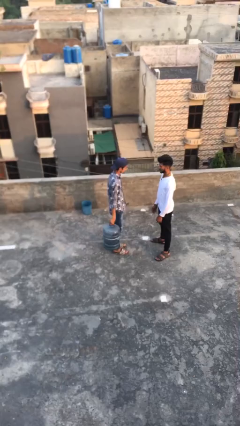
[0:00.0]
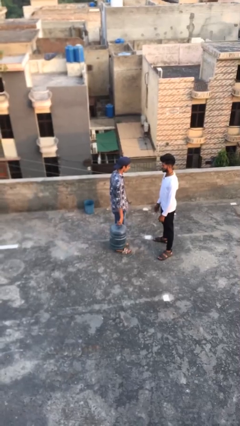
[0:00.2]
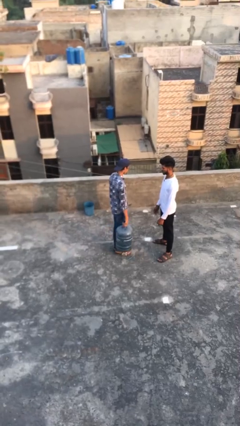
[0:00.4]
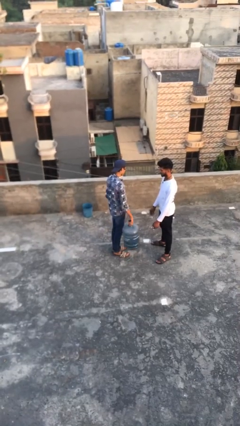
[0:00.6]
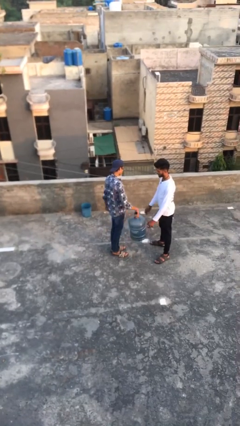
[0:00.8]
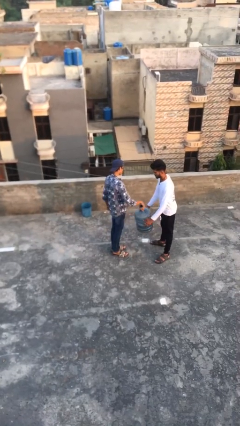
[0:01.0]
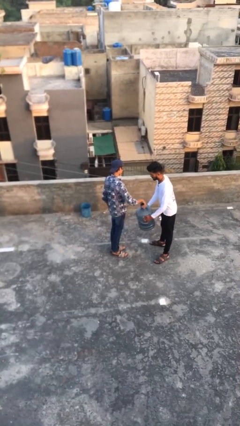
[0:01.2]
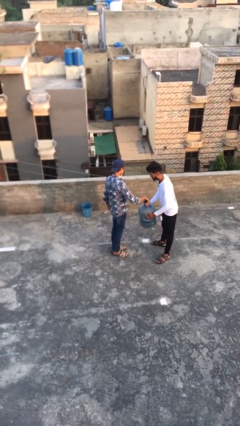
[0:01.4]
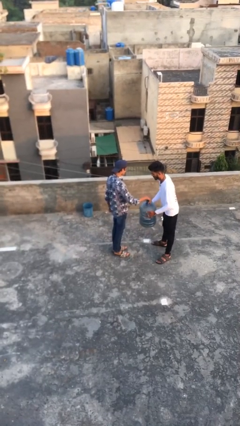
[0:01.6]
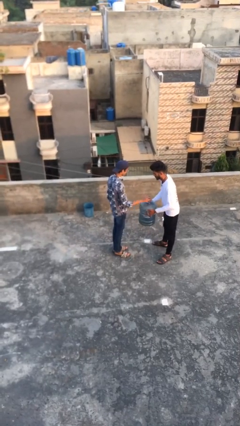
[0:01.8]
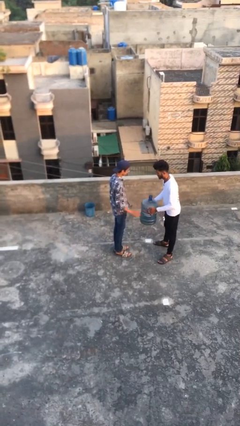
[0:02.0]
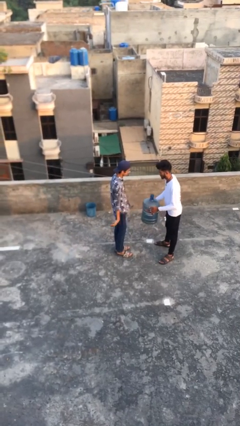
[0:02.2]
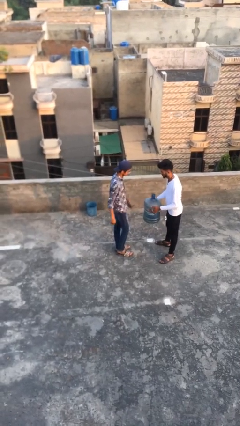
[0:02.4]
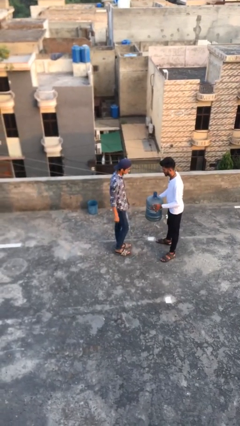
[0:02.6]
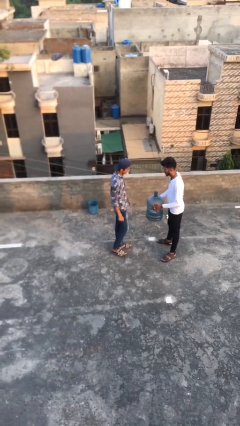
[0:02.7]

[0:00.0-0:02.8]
person transfers object to person

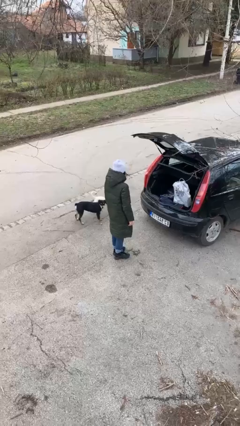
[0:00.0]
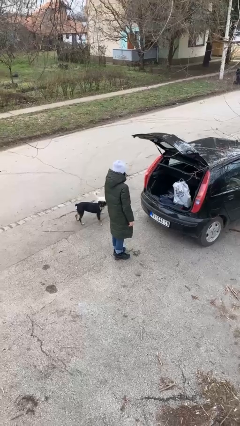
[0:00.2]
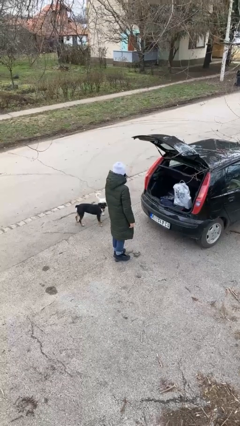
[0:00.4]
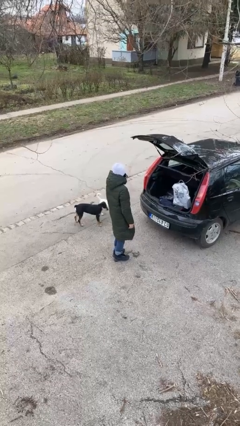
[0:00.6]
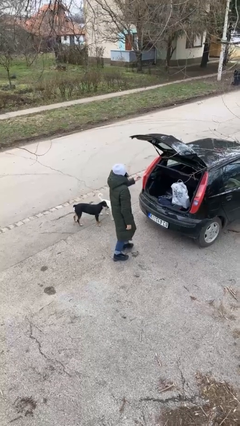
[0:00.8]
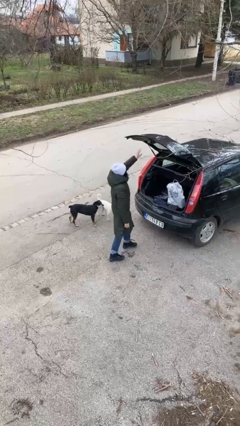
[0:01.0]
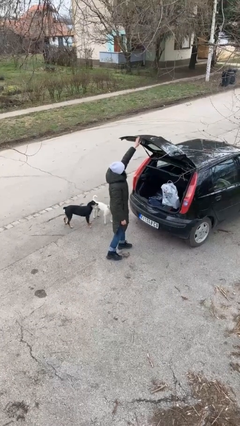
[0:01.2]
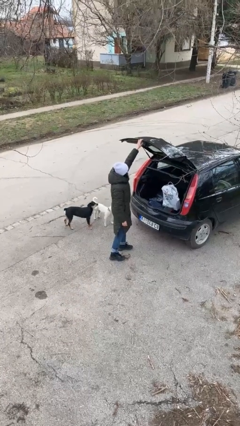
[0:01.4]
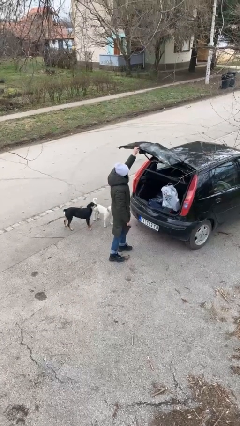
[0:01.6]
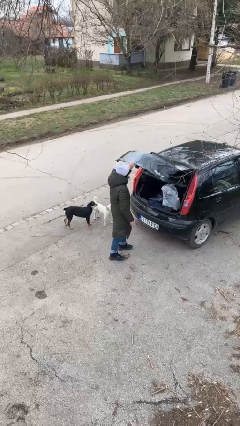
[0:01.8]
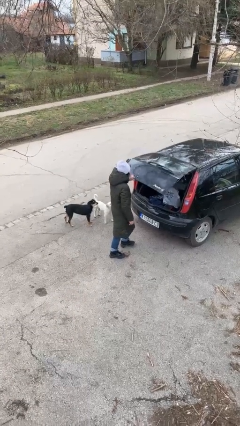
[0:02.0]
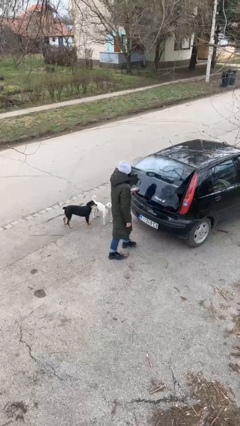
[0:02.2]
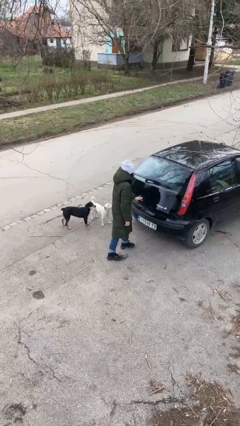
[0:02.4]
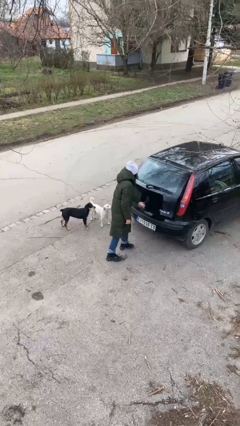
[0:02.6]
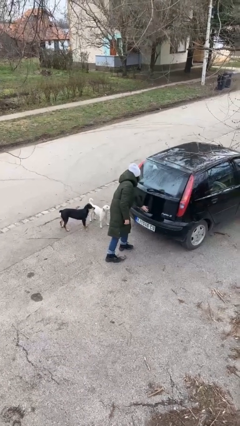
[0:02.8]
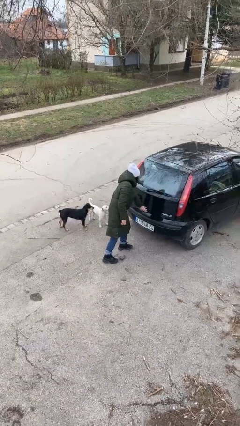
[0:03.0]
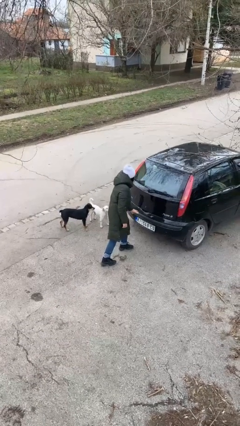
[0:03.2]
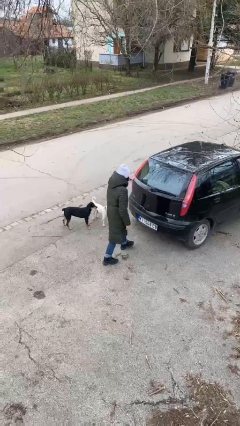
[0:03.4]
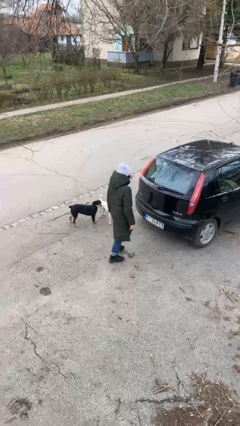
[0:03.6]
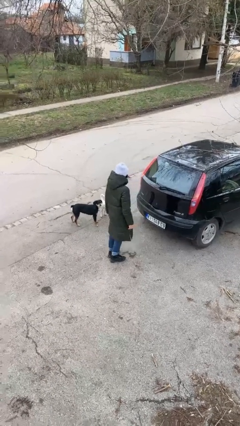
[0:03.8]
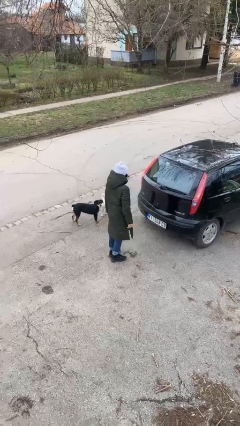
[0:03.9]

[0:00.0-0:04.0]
person closes car trunk

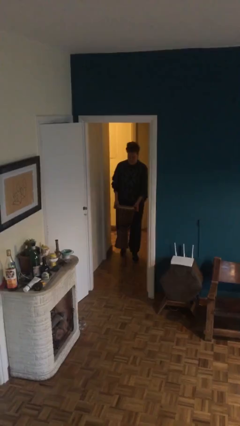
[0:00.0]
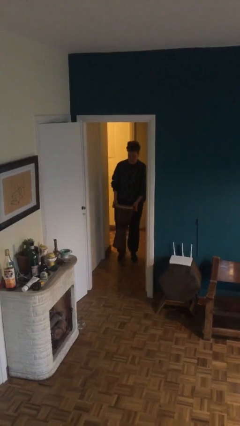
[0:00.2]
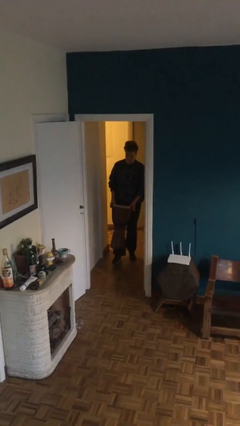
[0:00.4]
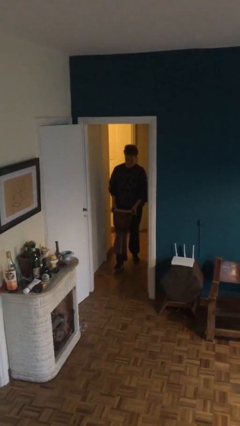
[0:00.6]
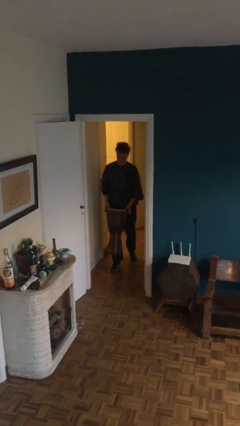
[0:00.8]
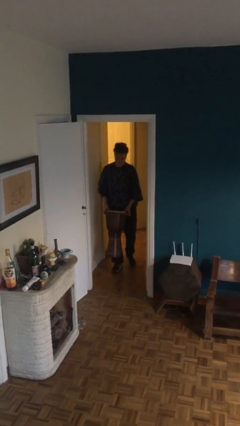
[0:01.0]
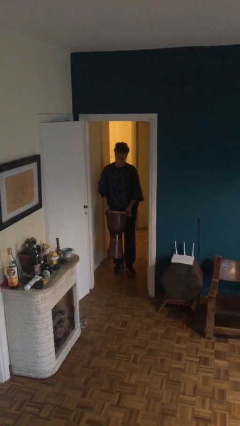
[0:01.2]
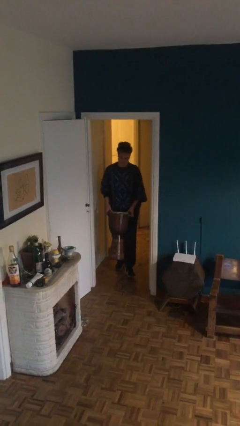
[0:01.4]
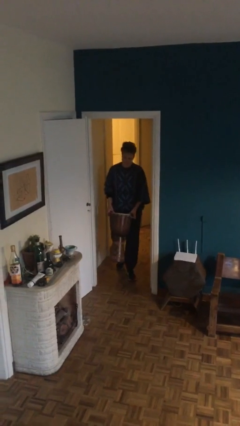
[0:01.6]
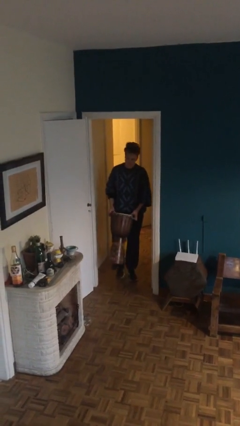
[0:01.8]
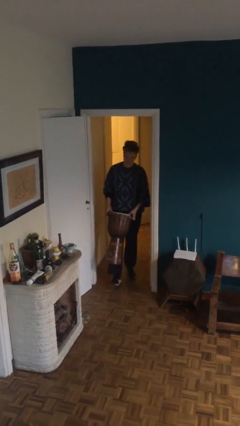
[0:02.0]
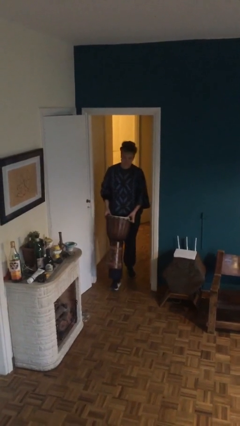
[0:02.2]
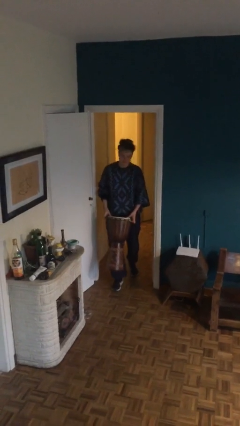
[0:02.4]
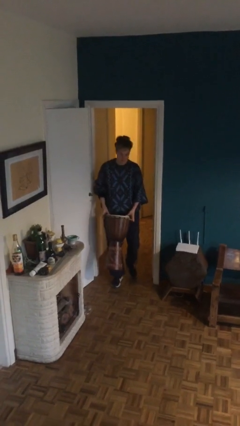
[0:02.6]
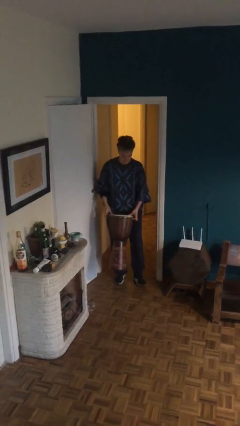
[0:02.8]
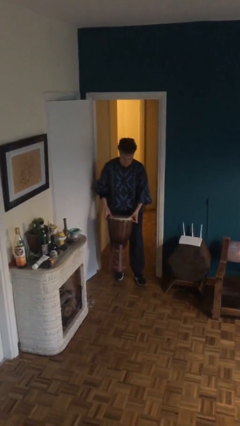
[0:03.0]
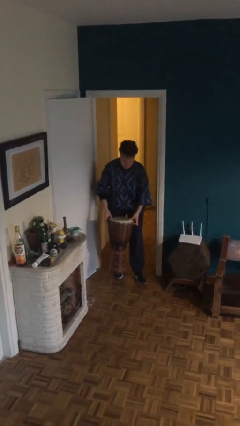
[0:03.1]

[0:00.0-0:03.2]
person carries heavy object

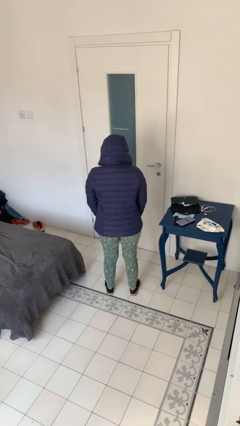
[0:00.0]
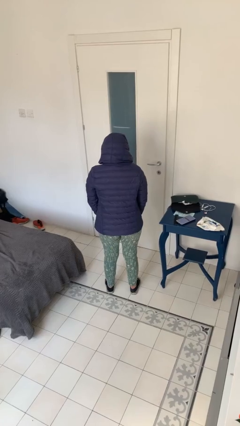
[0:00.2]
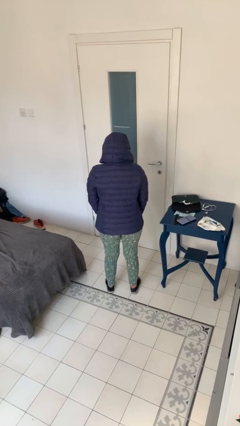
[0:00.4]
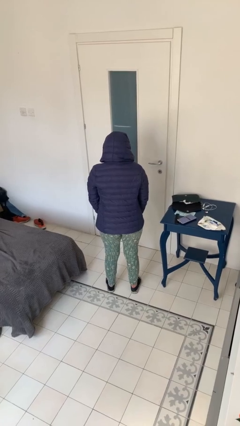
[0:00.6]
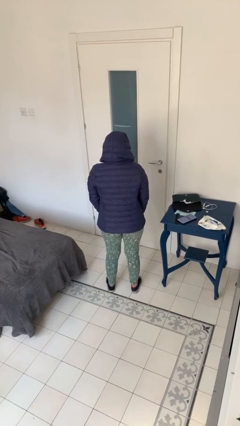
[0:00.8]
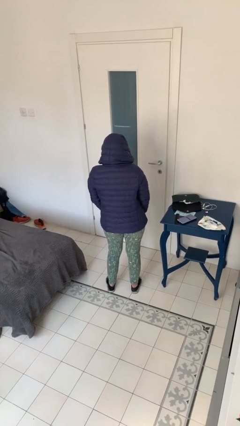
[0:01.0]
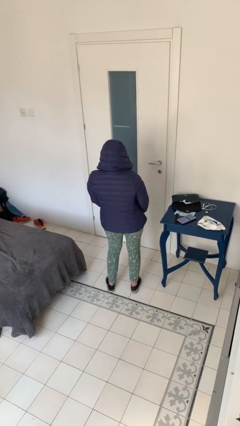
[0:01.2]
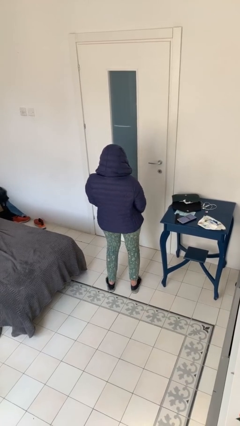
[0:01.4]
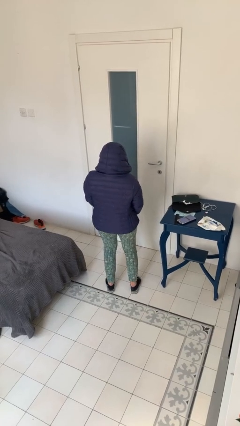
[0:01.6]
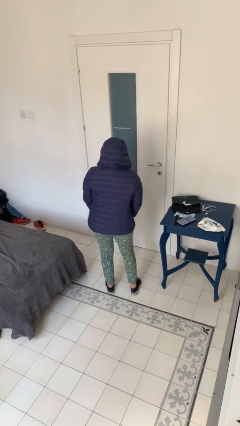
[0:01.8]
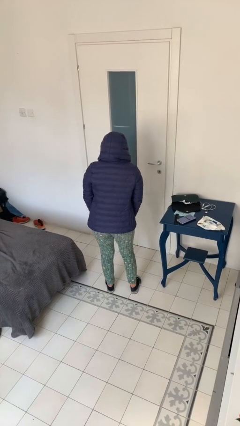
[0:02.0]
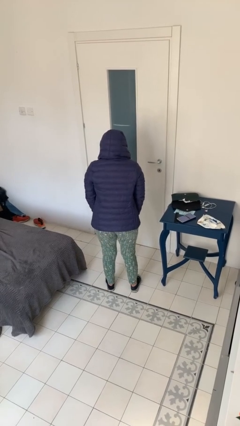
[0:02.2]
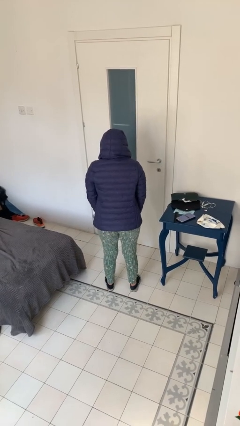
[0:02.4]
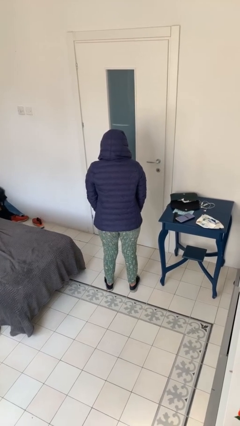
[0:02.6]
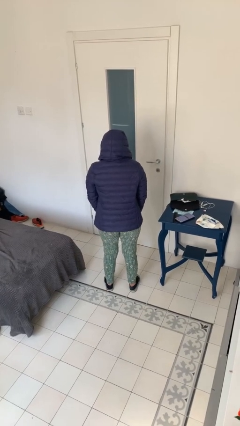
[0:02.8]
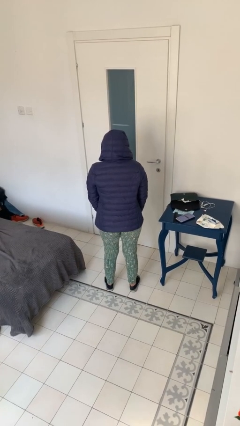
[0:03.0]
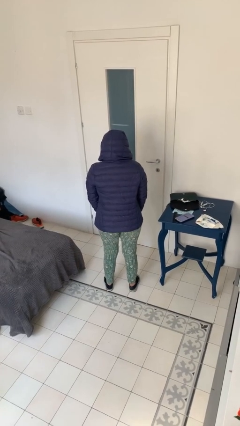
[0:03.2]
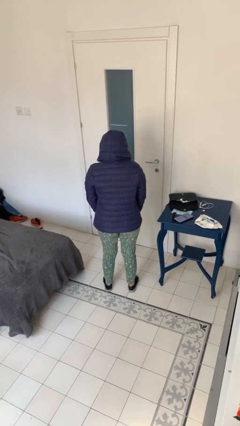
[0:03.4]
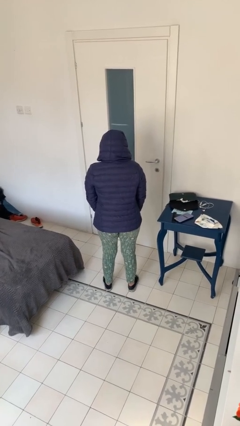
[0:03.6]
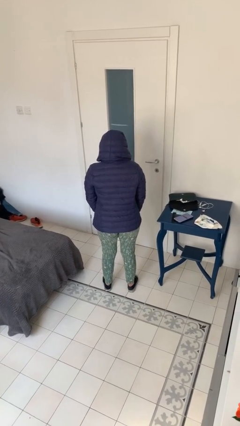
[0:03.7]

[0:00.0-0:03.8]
person wiggles hips

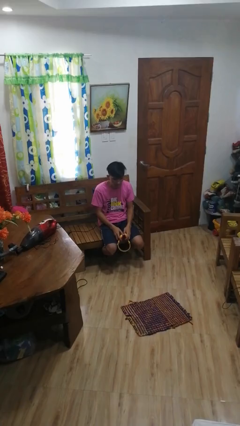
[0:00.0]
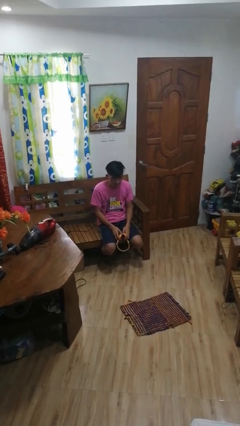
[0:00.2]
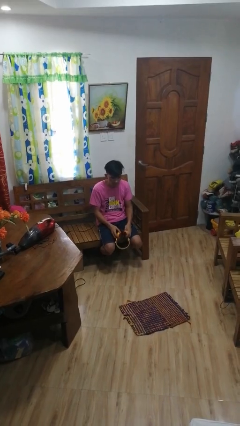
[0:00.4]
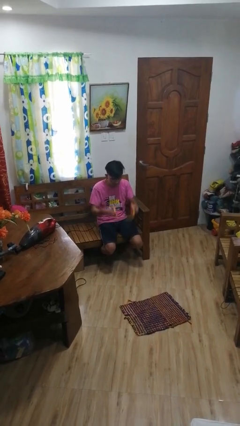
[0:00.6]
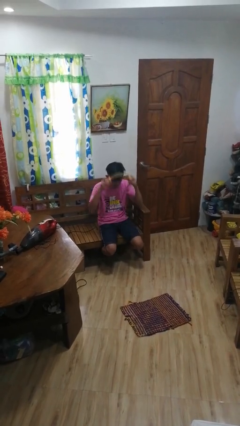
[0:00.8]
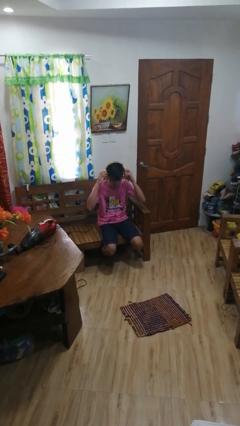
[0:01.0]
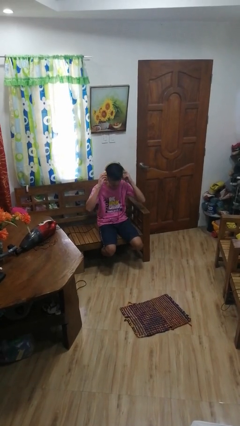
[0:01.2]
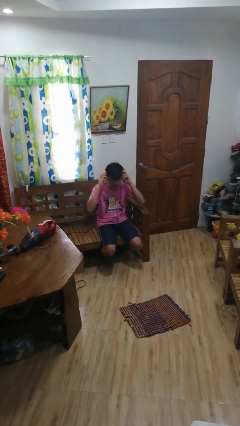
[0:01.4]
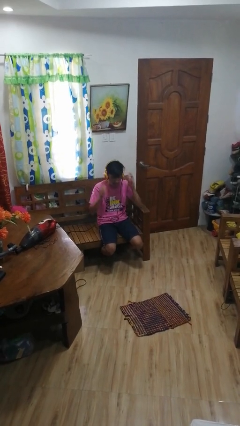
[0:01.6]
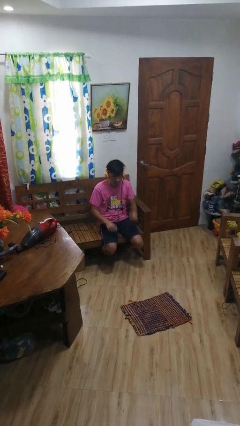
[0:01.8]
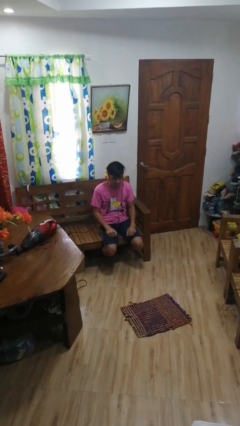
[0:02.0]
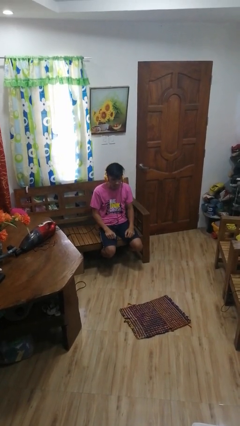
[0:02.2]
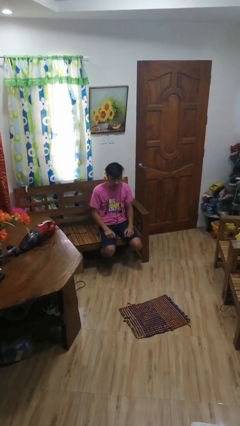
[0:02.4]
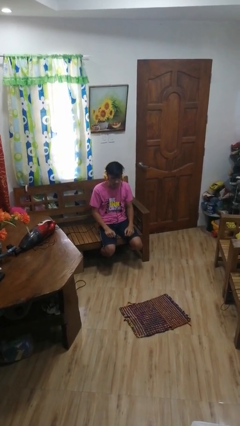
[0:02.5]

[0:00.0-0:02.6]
person puts on headphones

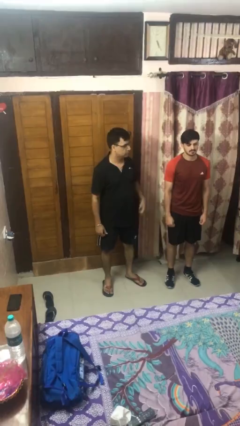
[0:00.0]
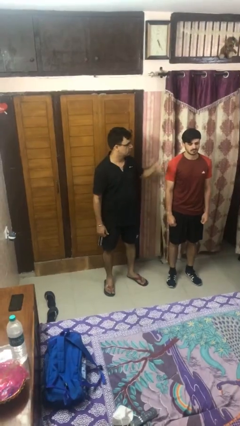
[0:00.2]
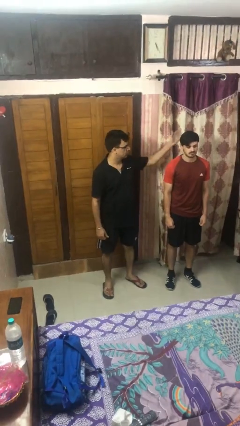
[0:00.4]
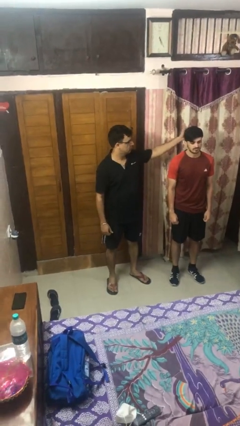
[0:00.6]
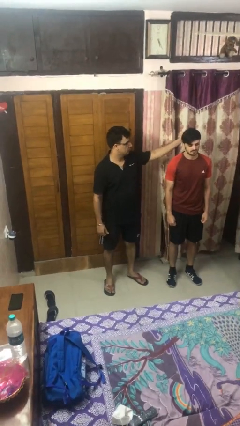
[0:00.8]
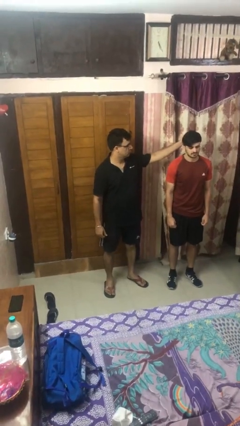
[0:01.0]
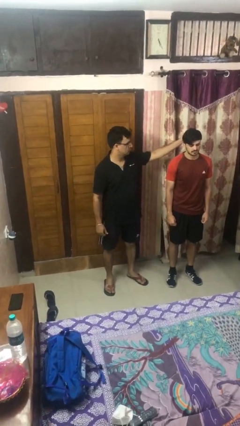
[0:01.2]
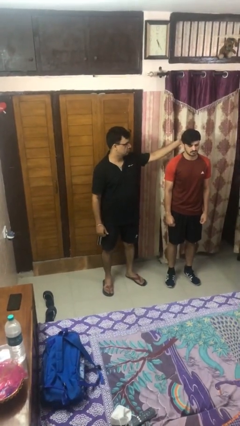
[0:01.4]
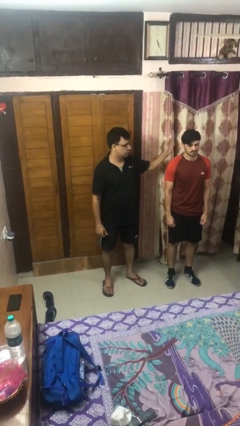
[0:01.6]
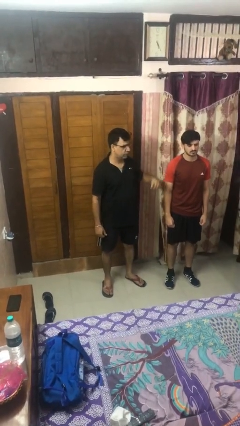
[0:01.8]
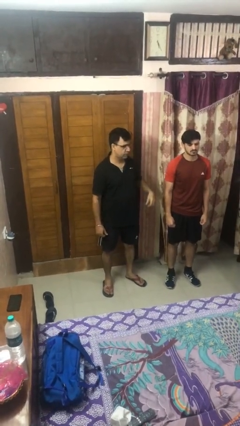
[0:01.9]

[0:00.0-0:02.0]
person grabs person by hair
